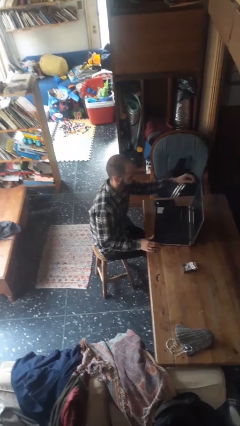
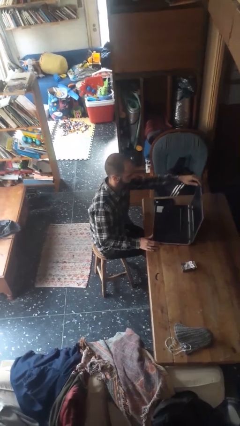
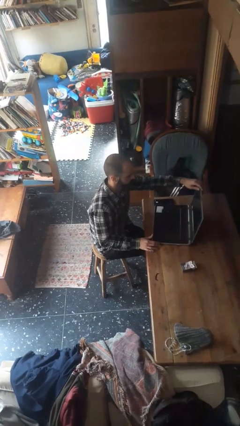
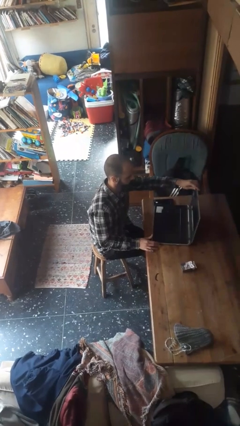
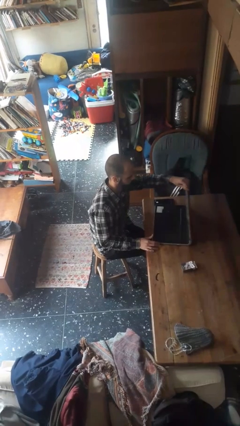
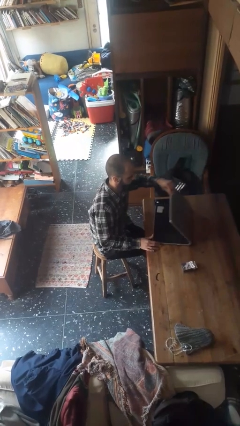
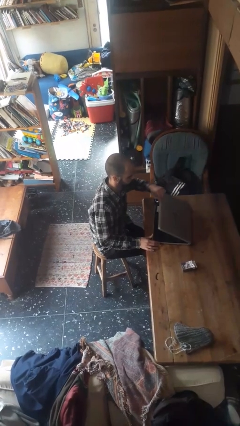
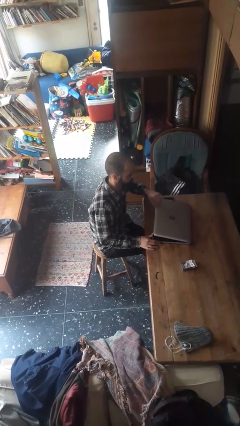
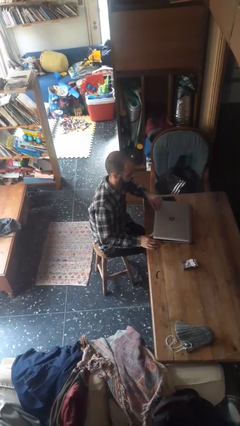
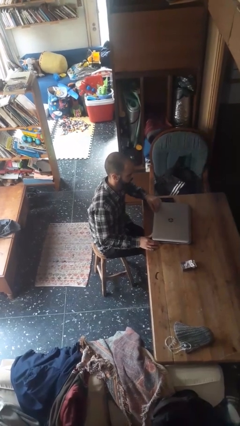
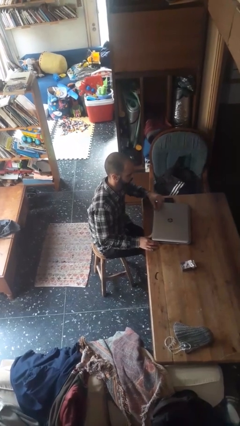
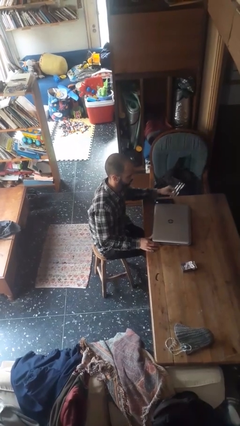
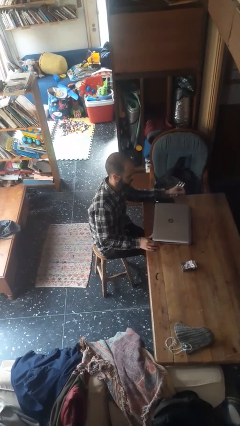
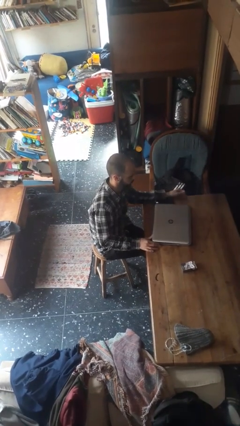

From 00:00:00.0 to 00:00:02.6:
person closes laptop

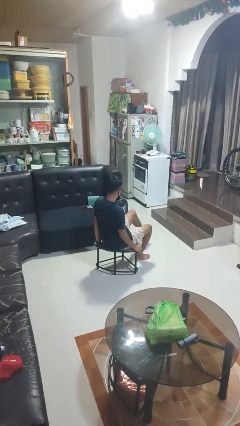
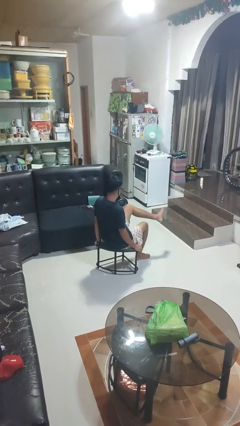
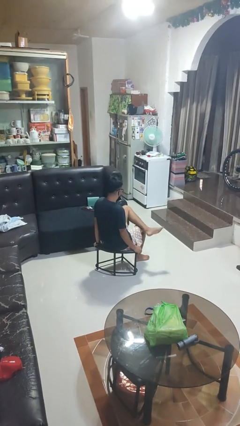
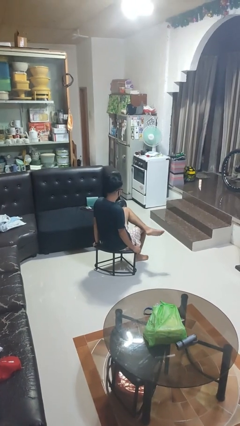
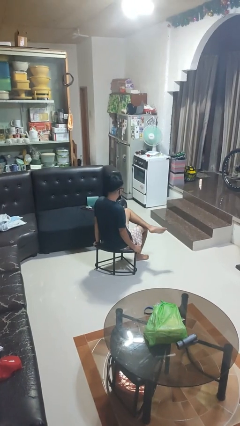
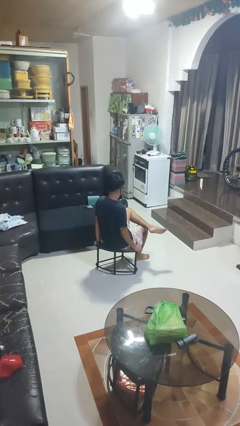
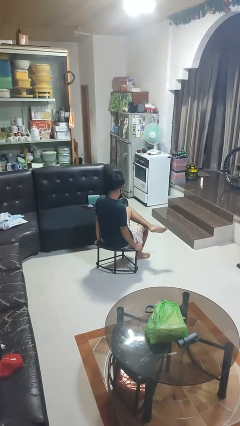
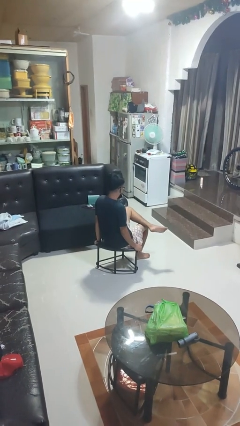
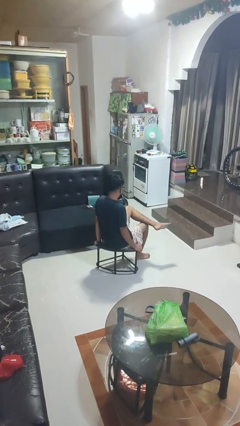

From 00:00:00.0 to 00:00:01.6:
person crosses legs

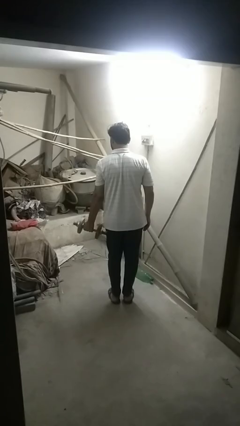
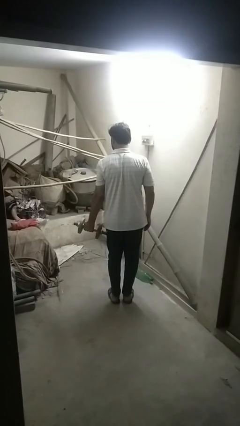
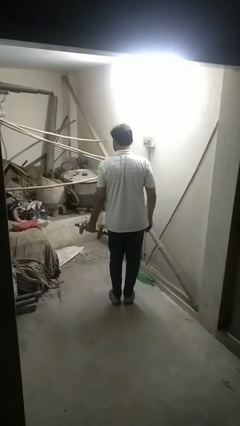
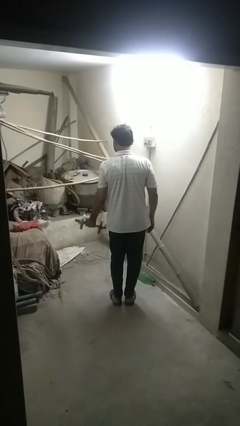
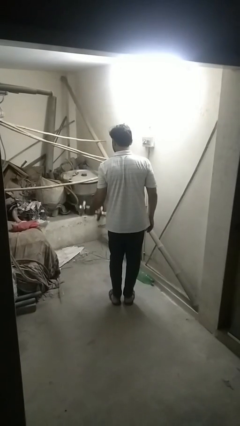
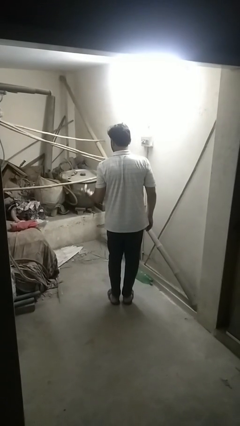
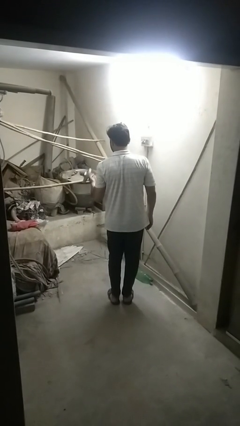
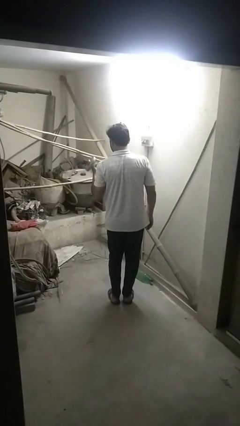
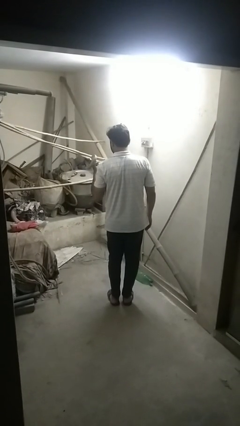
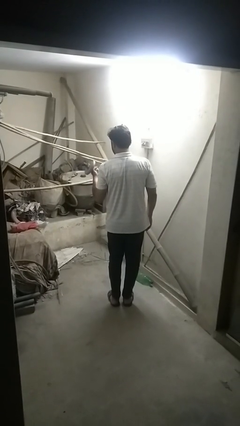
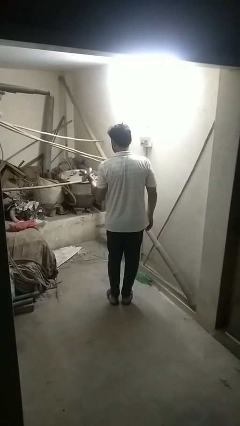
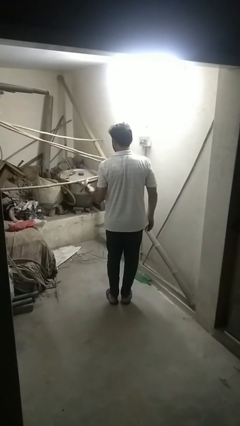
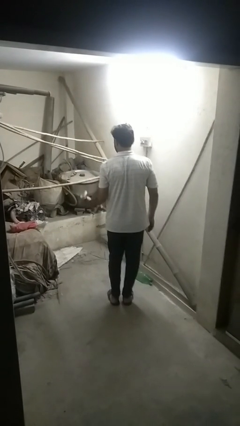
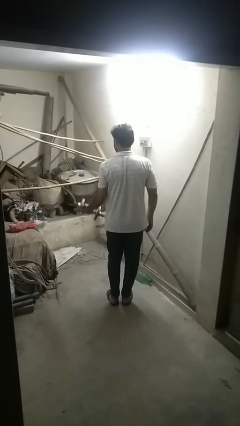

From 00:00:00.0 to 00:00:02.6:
person lifts dumbbells

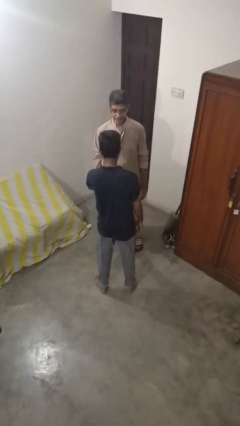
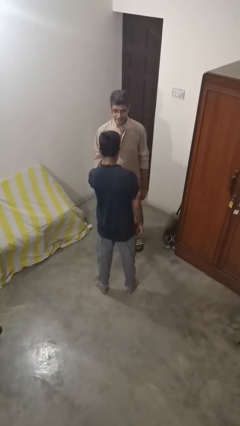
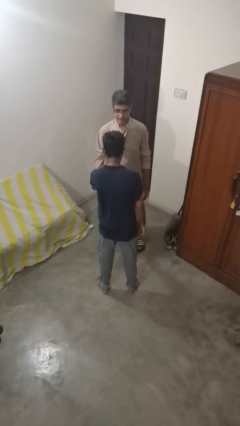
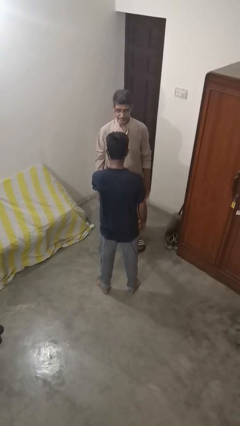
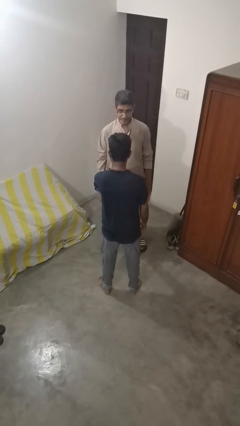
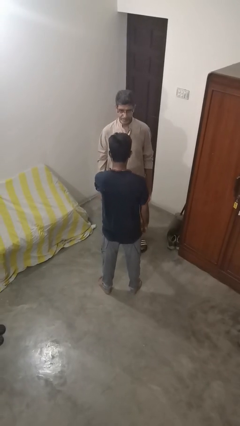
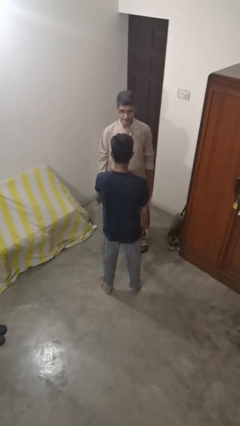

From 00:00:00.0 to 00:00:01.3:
person grabs person by forearm

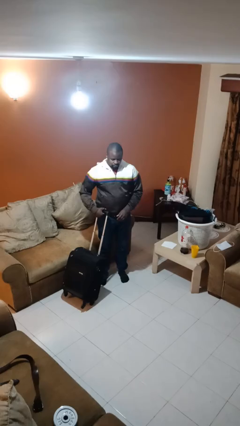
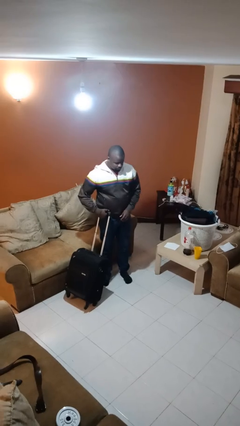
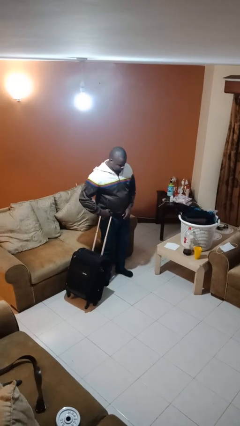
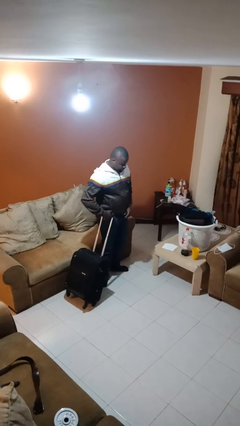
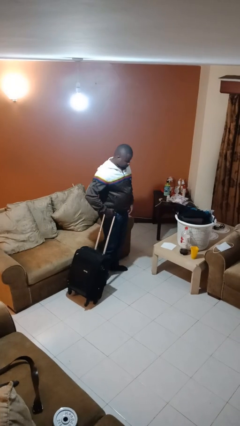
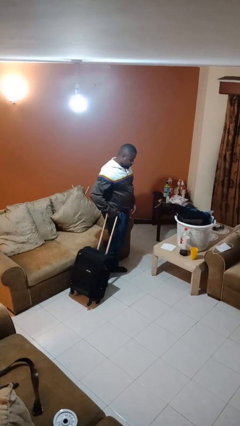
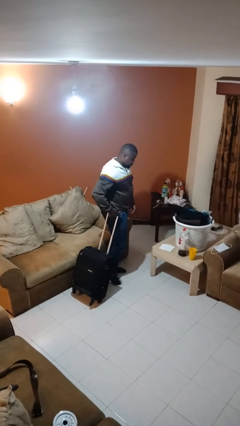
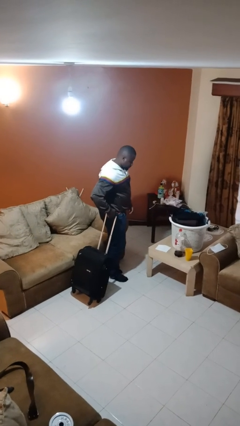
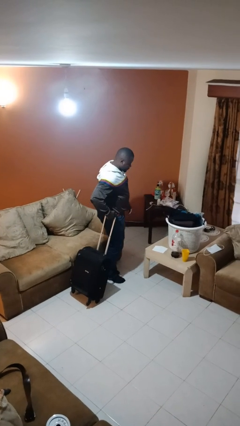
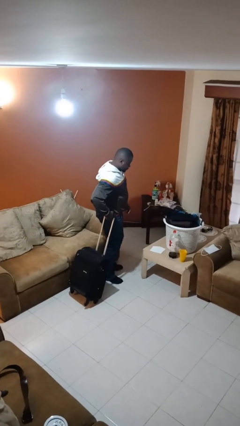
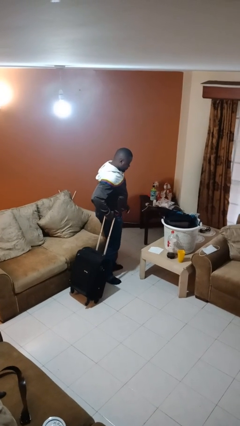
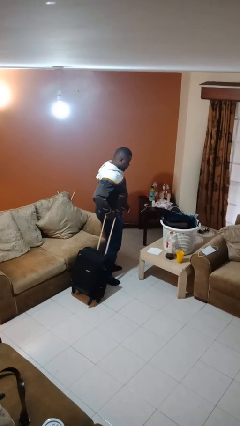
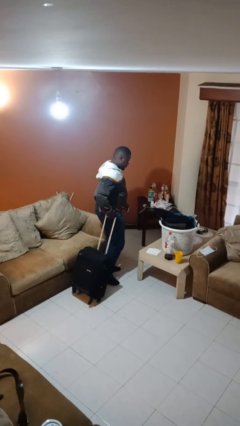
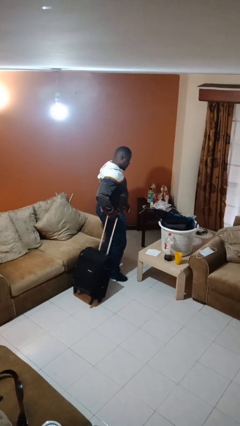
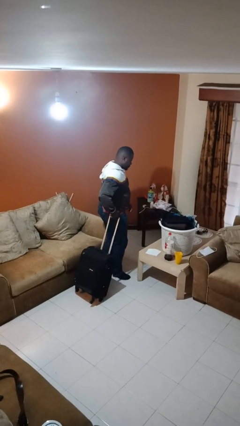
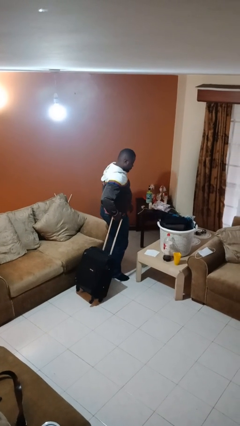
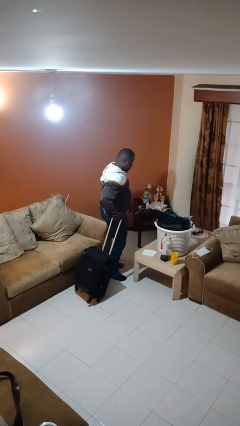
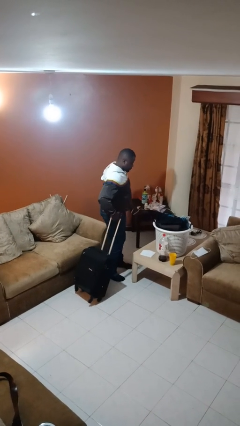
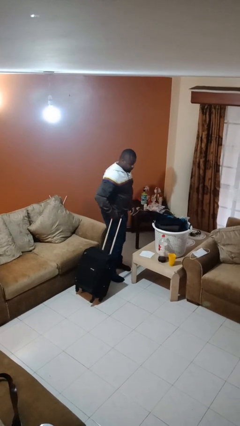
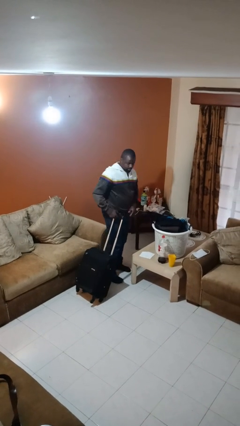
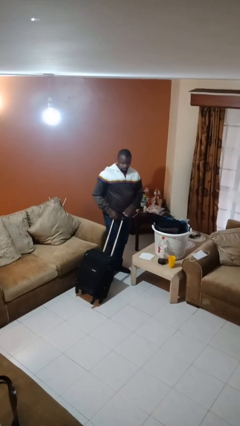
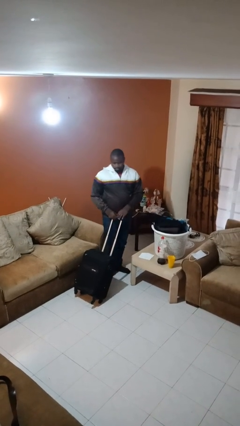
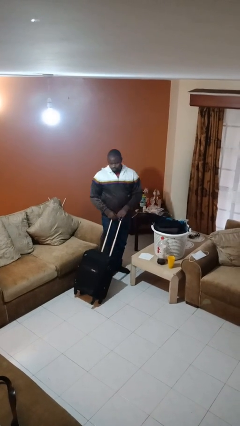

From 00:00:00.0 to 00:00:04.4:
person pulls wheeled cart

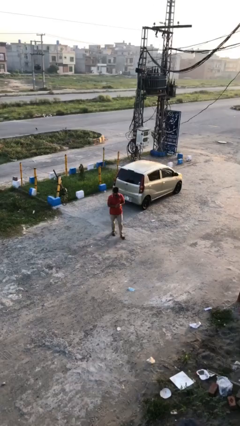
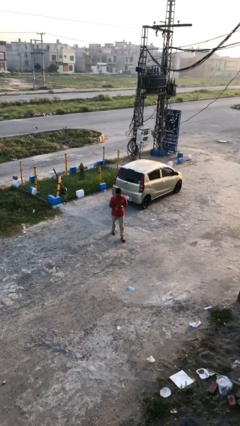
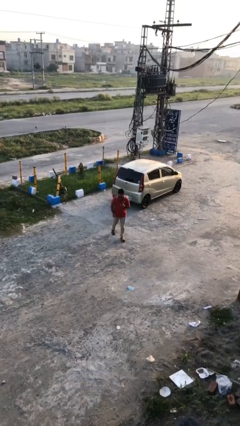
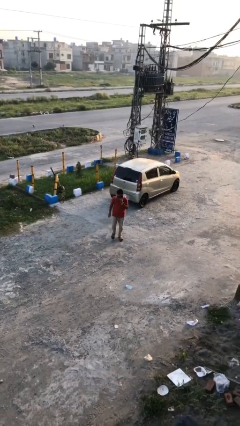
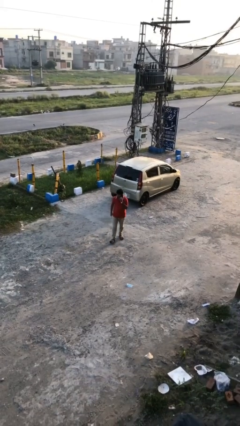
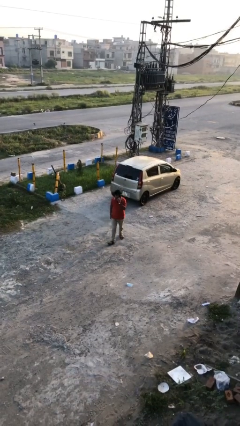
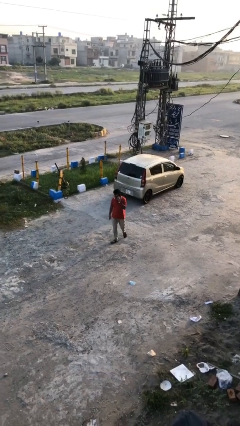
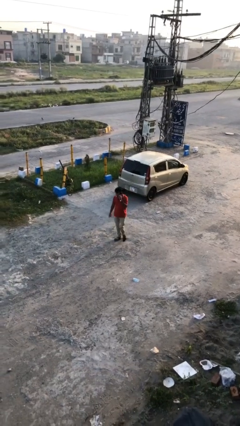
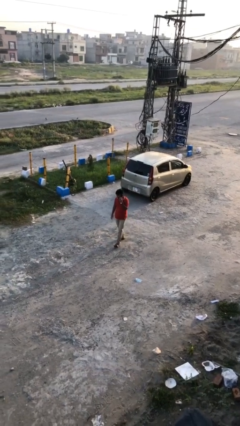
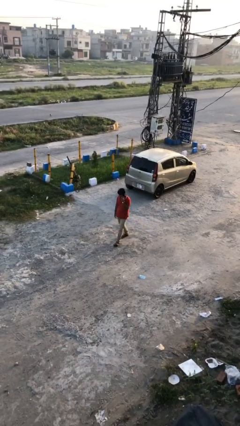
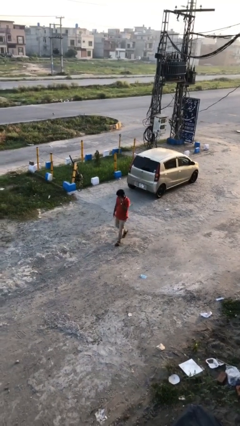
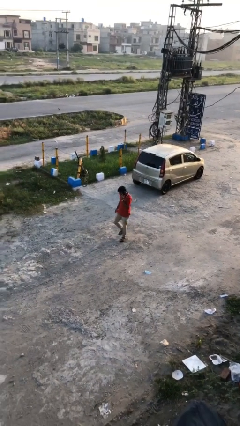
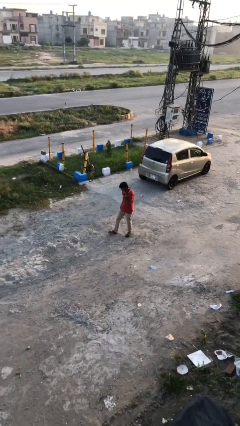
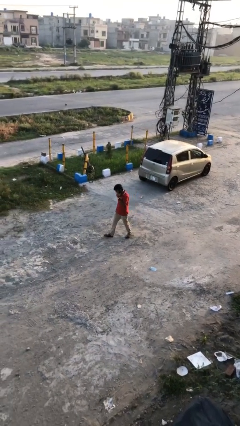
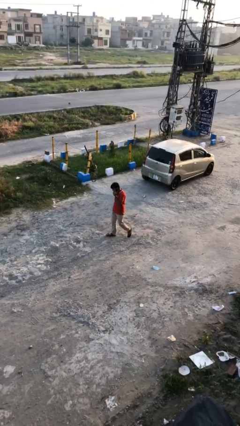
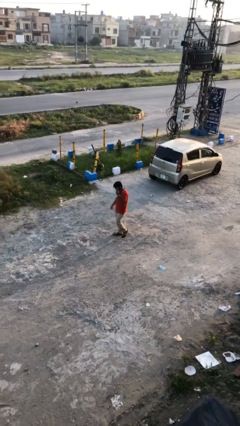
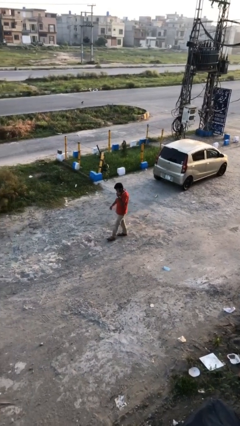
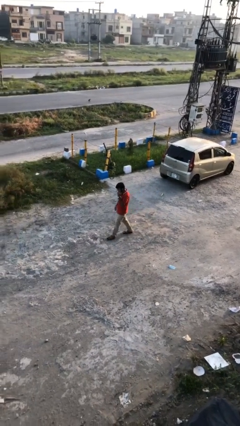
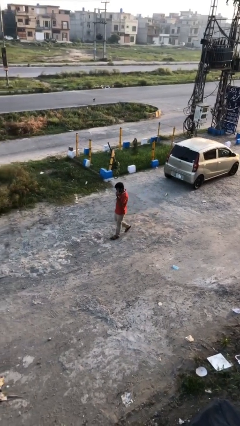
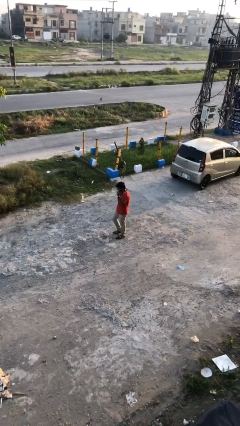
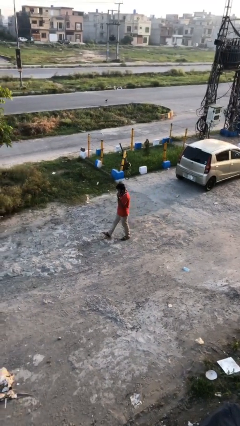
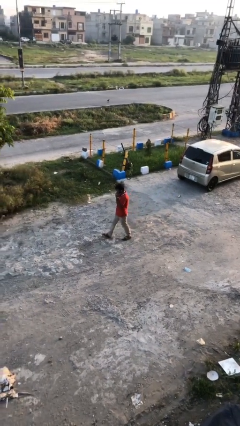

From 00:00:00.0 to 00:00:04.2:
person talks on phone

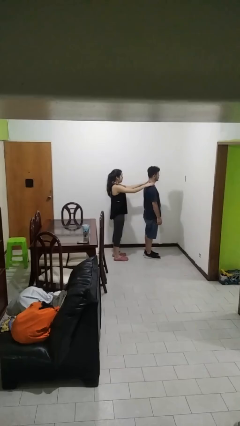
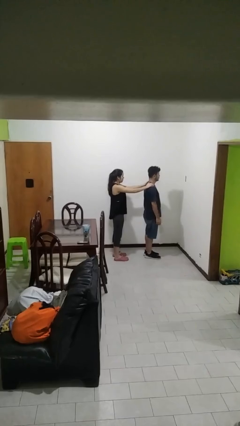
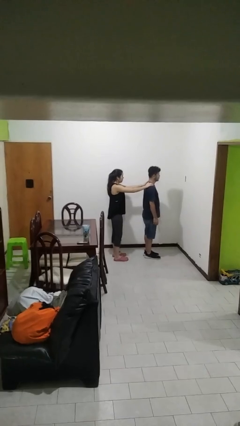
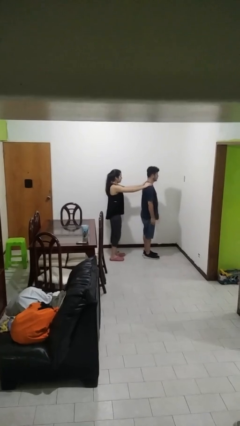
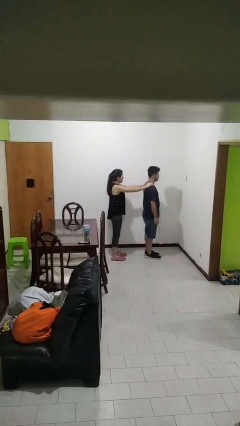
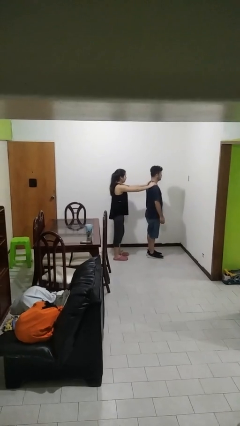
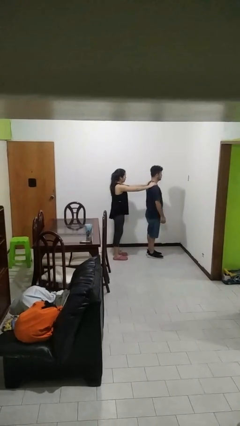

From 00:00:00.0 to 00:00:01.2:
person grabs person by shoulder
